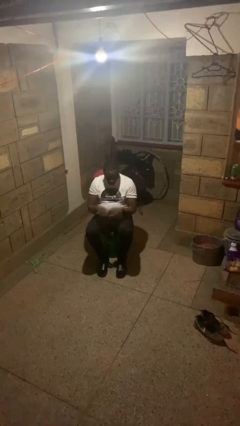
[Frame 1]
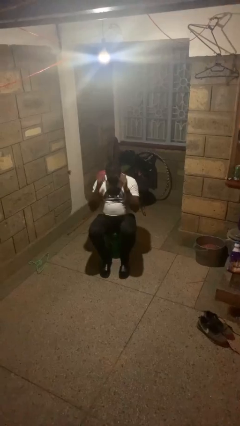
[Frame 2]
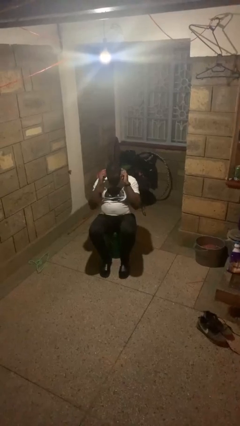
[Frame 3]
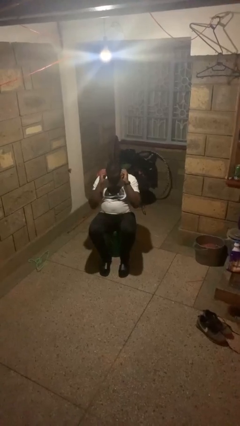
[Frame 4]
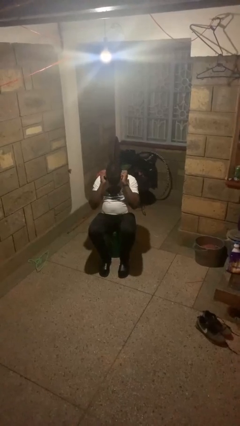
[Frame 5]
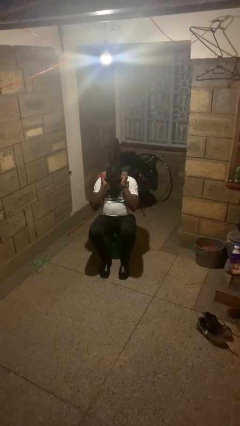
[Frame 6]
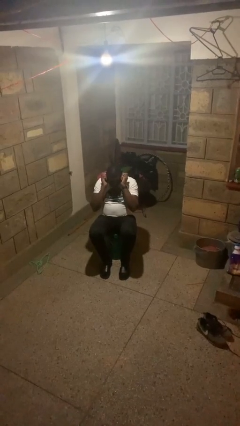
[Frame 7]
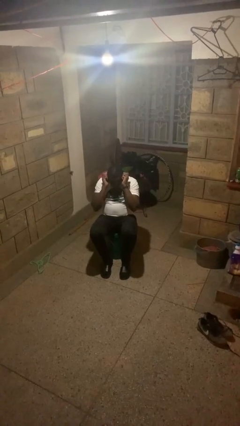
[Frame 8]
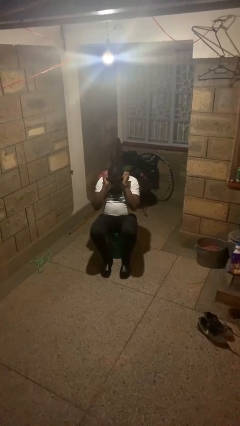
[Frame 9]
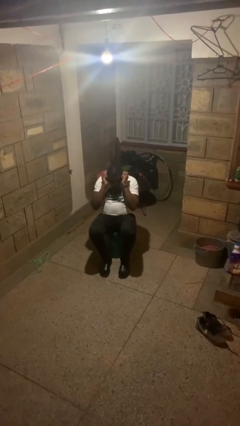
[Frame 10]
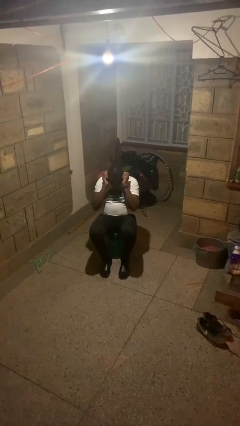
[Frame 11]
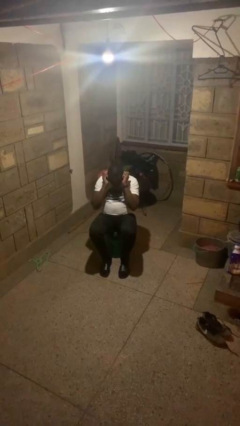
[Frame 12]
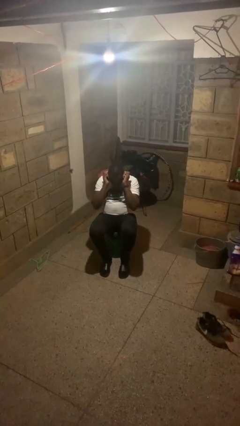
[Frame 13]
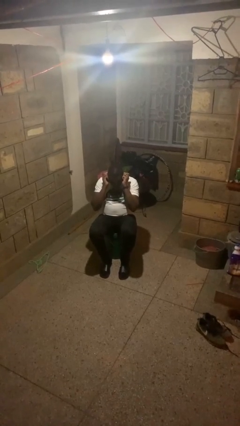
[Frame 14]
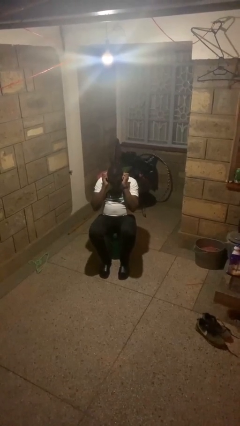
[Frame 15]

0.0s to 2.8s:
person touches earlobe

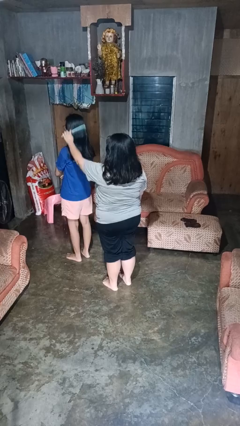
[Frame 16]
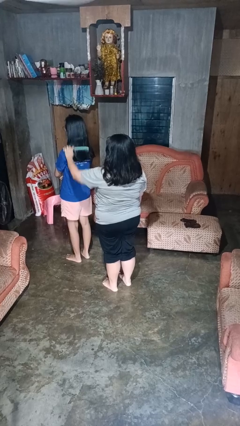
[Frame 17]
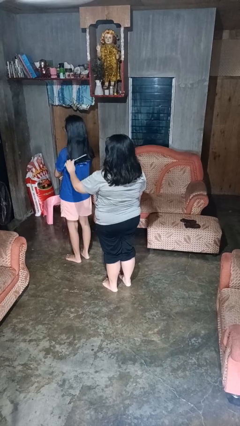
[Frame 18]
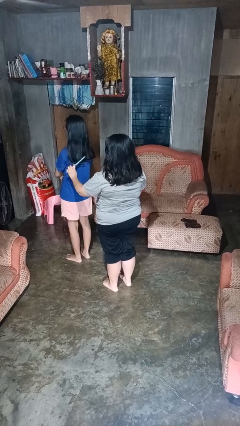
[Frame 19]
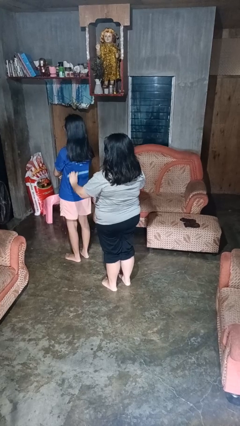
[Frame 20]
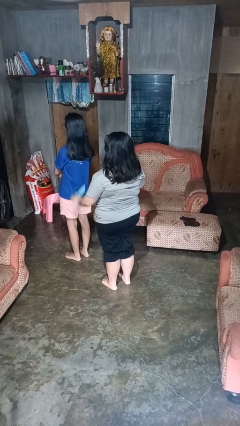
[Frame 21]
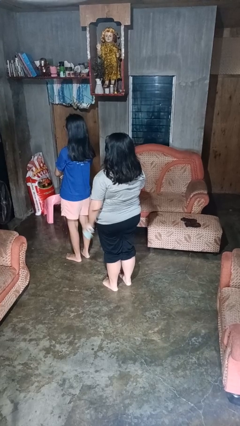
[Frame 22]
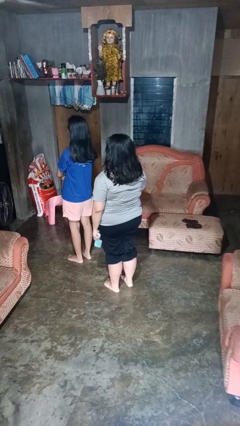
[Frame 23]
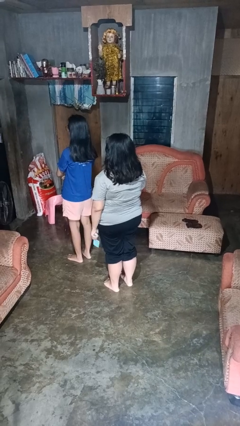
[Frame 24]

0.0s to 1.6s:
person brushes hair of person

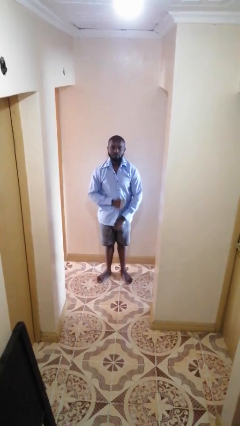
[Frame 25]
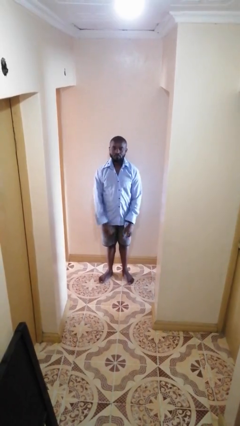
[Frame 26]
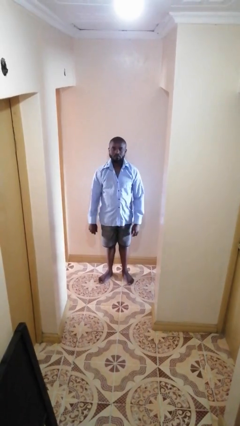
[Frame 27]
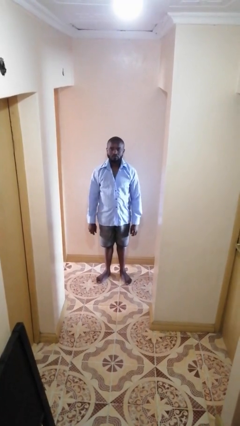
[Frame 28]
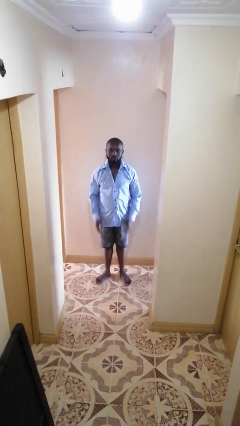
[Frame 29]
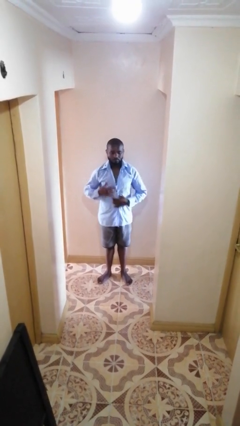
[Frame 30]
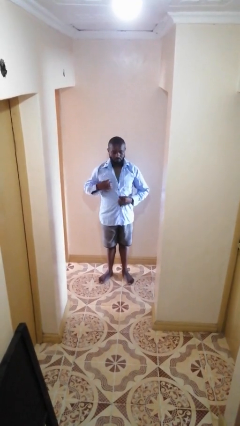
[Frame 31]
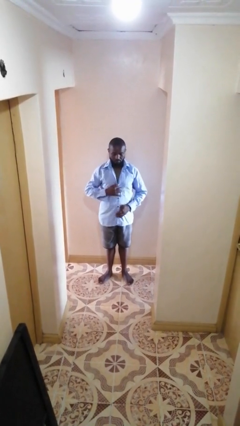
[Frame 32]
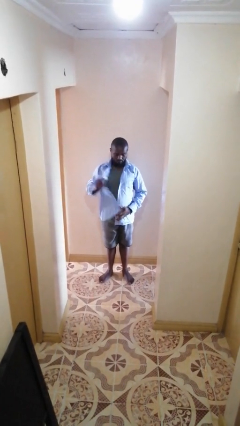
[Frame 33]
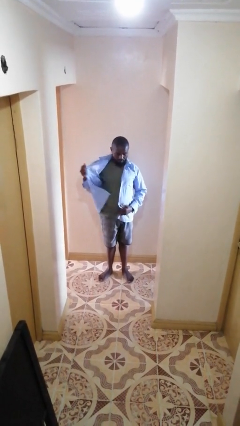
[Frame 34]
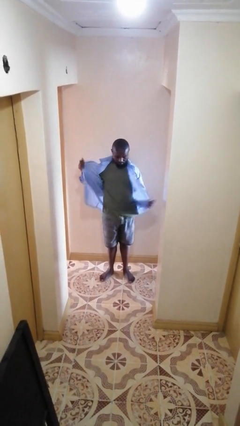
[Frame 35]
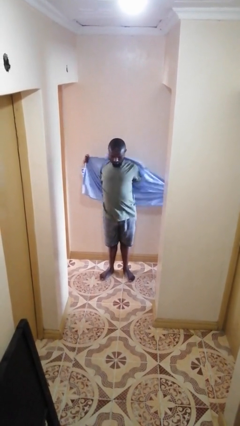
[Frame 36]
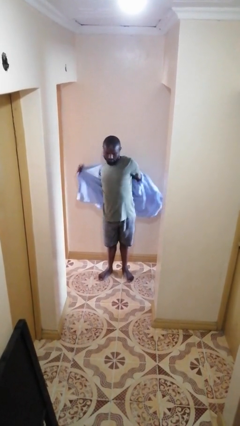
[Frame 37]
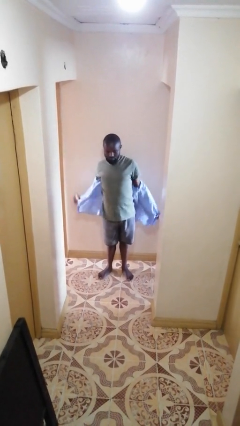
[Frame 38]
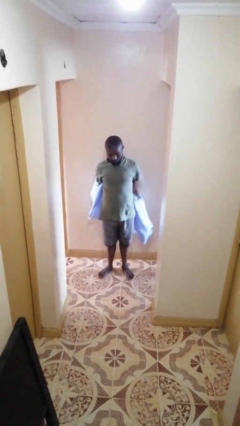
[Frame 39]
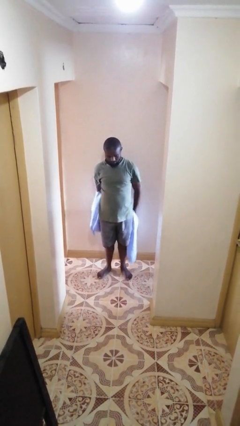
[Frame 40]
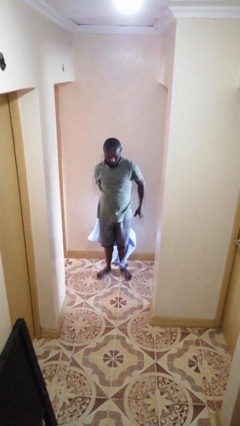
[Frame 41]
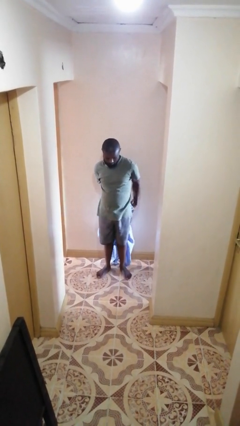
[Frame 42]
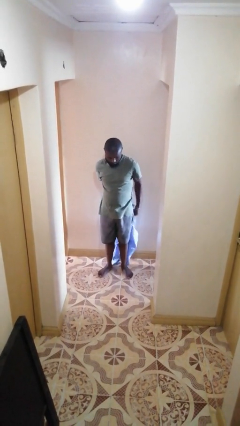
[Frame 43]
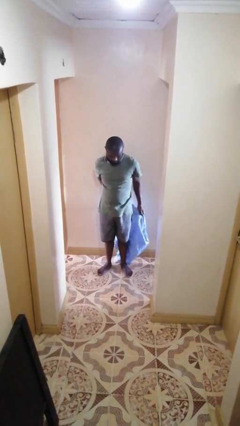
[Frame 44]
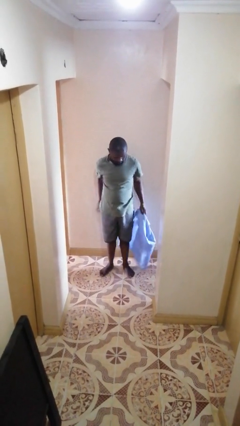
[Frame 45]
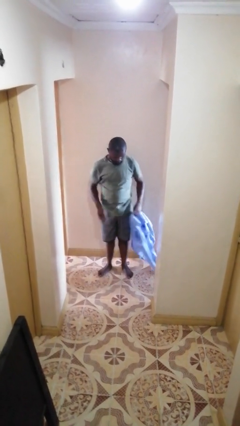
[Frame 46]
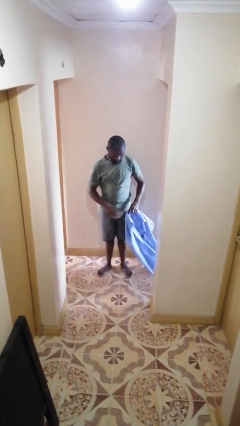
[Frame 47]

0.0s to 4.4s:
person takes off shirt

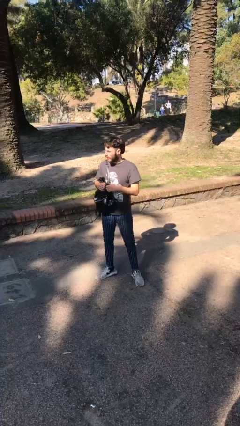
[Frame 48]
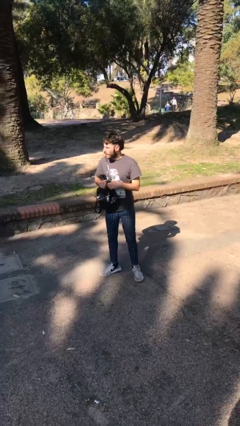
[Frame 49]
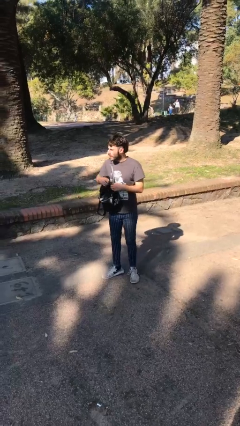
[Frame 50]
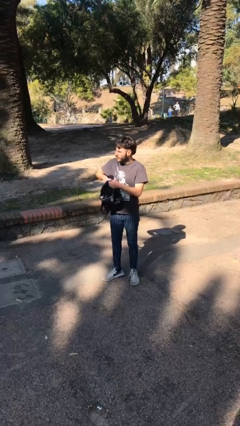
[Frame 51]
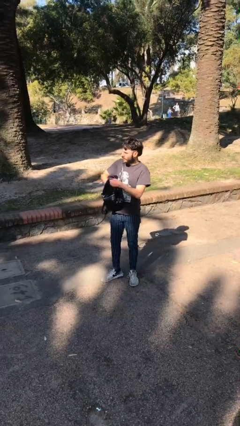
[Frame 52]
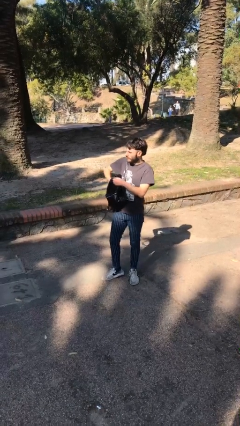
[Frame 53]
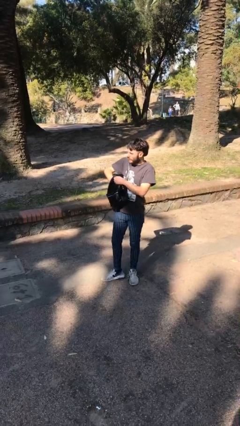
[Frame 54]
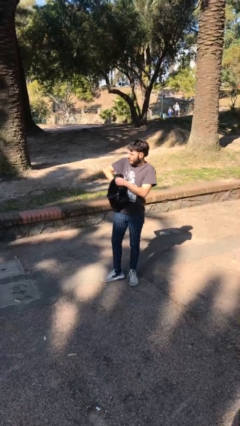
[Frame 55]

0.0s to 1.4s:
person searches in backpack

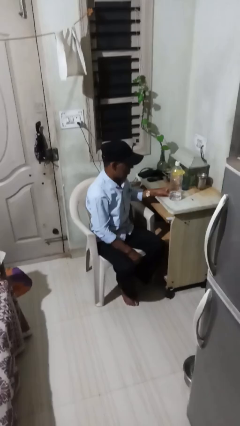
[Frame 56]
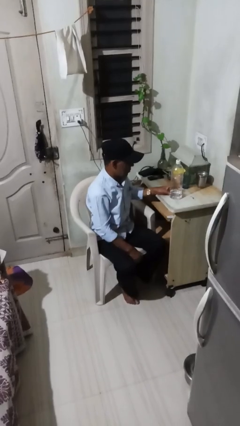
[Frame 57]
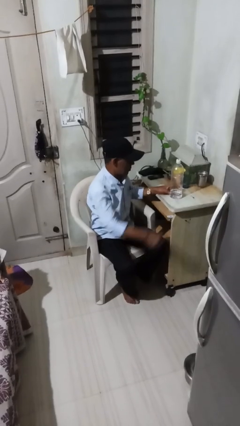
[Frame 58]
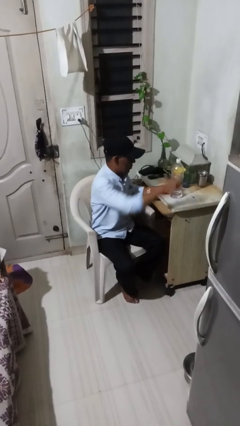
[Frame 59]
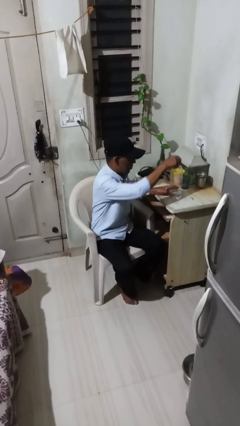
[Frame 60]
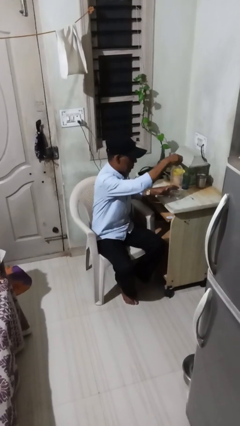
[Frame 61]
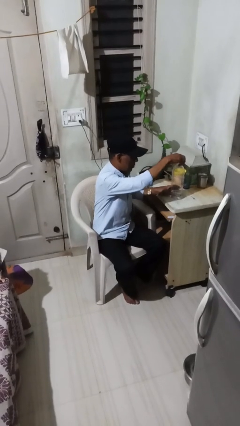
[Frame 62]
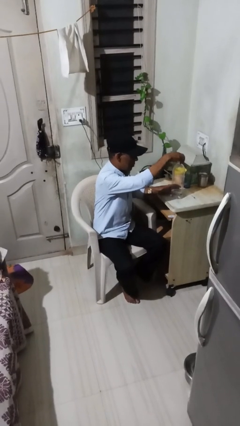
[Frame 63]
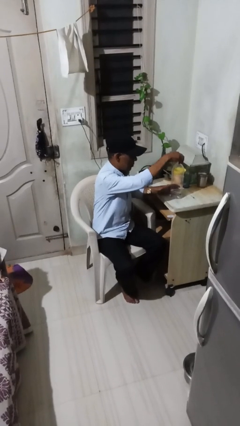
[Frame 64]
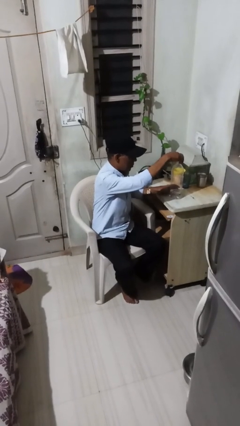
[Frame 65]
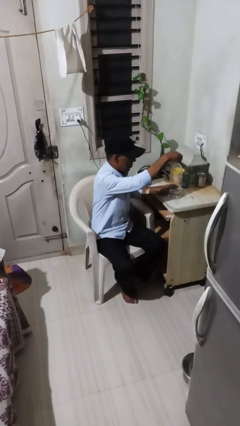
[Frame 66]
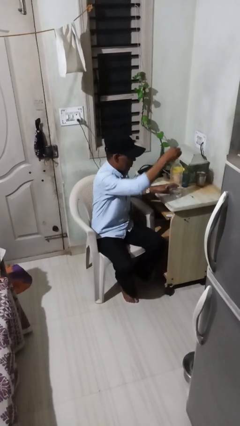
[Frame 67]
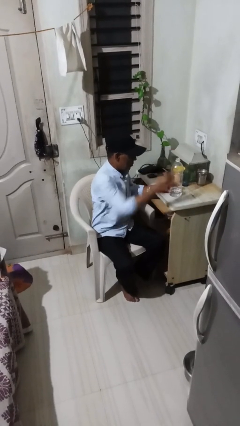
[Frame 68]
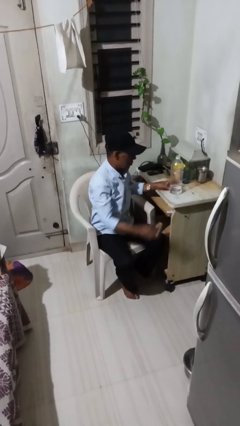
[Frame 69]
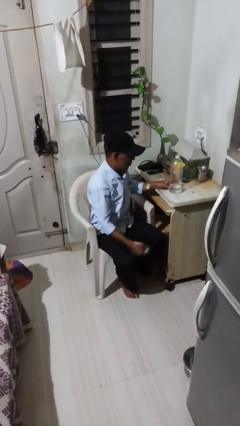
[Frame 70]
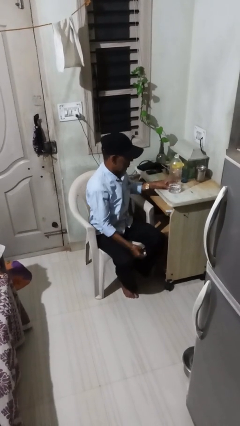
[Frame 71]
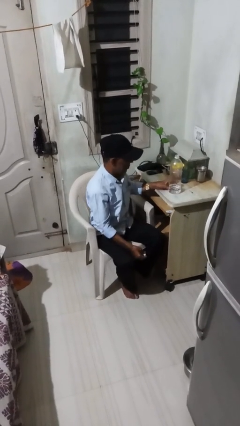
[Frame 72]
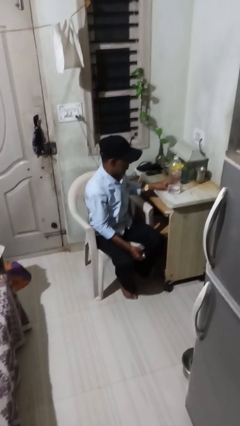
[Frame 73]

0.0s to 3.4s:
person unscrews lid from bottle

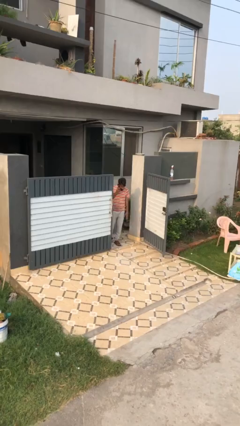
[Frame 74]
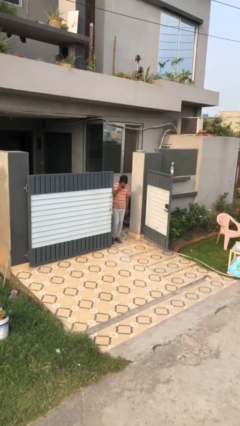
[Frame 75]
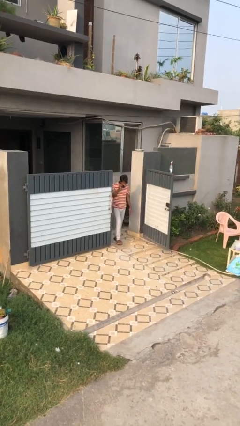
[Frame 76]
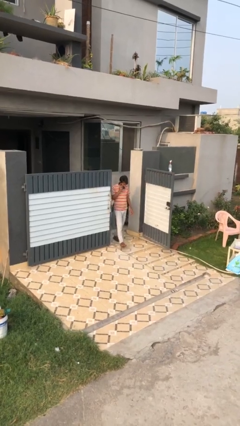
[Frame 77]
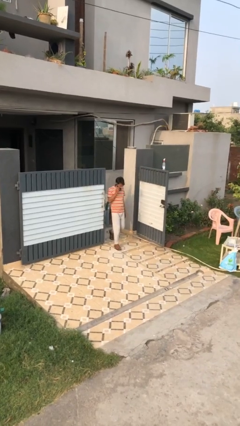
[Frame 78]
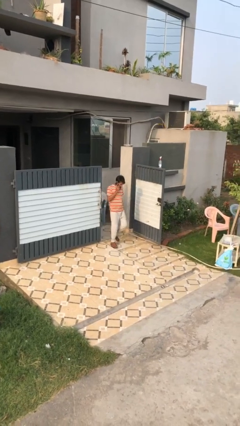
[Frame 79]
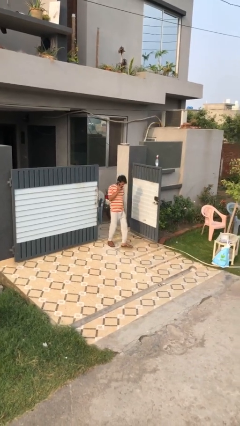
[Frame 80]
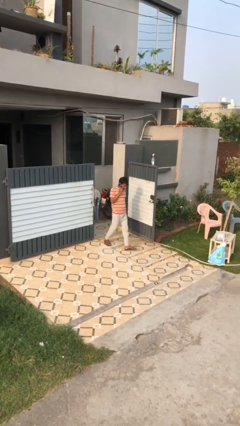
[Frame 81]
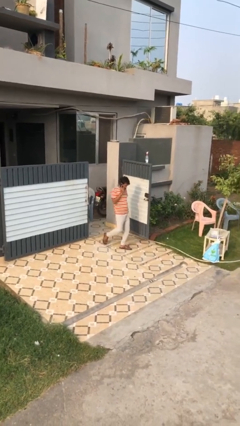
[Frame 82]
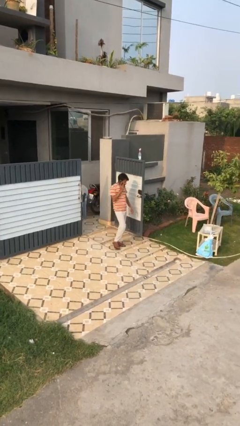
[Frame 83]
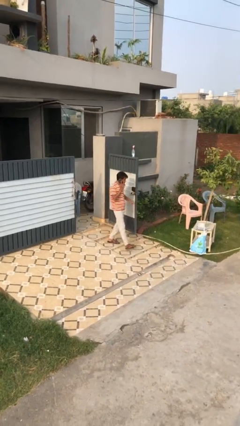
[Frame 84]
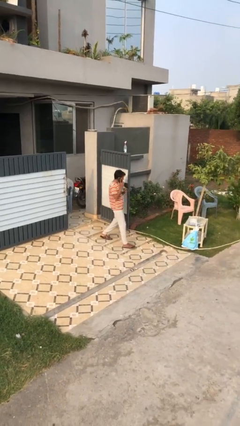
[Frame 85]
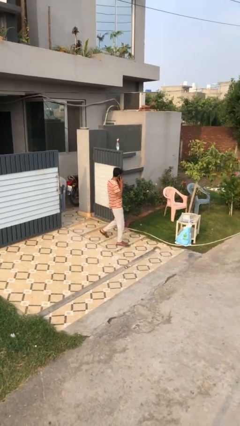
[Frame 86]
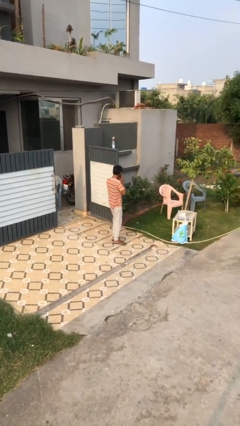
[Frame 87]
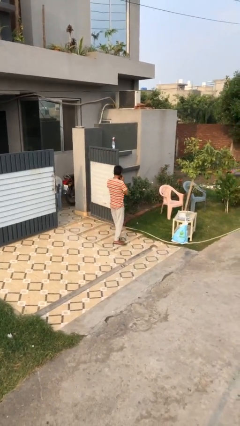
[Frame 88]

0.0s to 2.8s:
person enters scene through structure

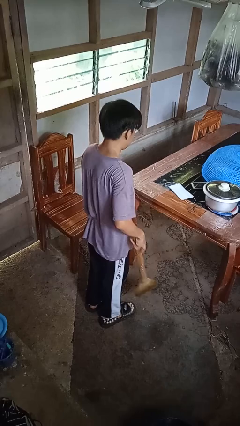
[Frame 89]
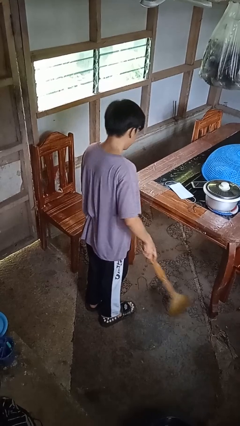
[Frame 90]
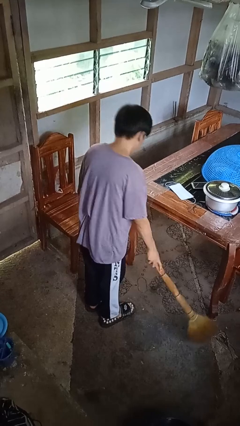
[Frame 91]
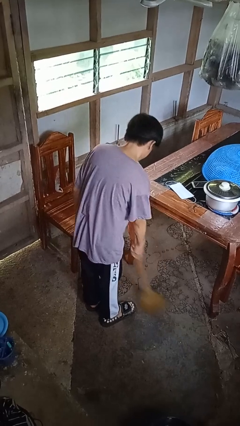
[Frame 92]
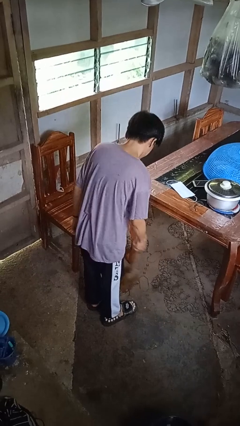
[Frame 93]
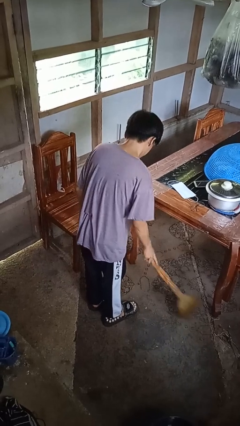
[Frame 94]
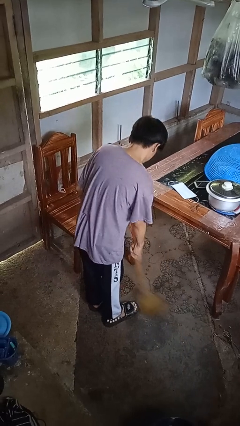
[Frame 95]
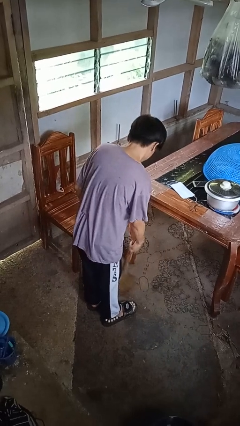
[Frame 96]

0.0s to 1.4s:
person sweeps floor
